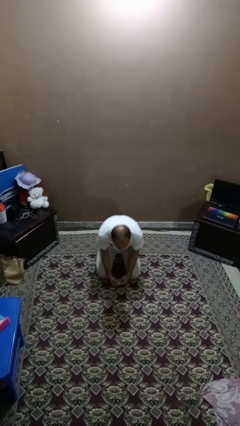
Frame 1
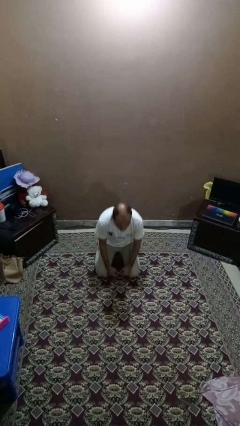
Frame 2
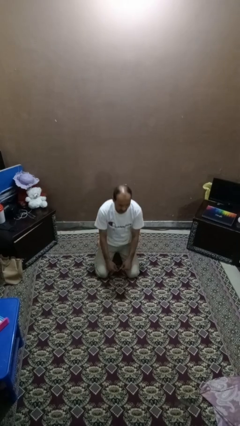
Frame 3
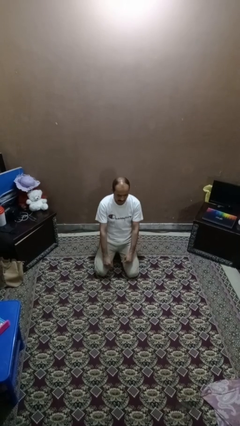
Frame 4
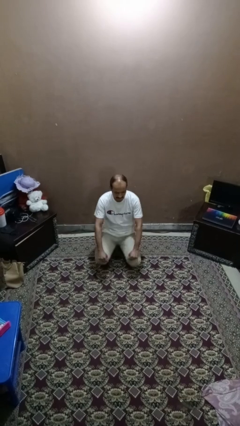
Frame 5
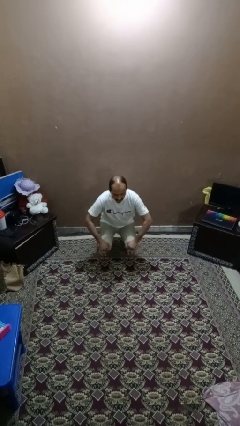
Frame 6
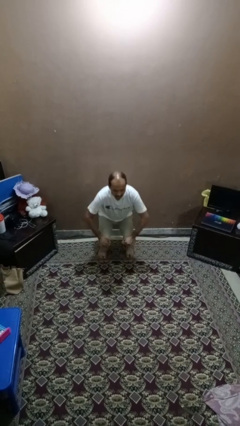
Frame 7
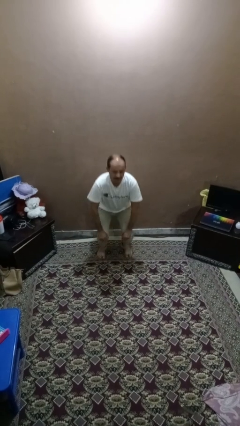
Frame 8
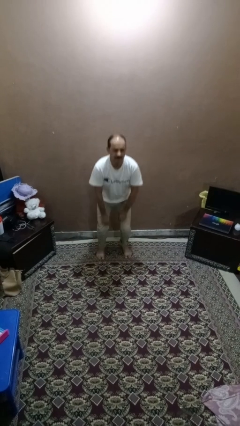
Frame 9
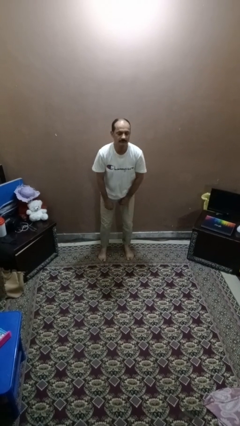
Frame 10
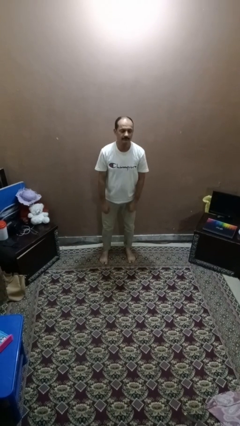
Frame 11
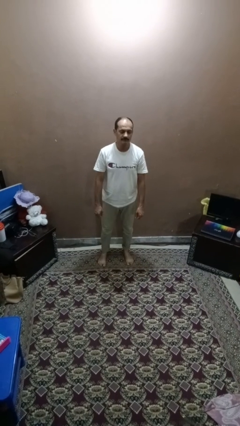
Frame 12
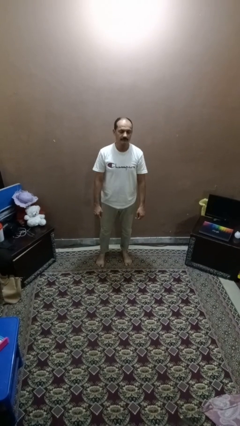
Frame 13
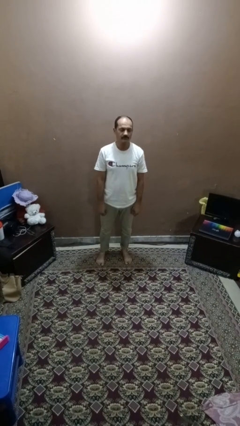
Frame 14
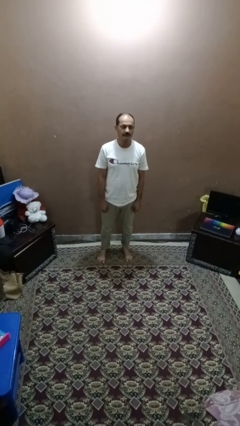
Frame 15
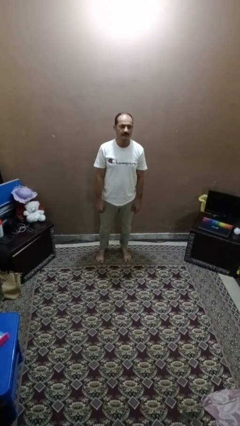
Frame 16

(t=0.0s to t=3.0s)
person stands up from floor

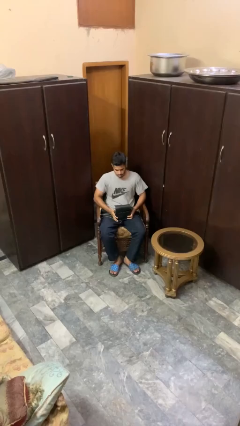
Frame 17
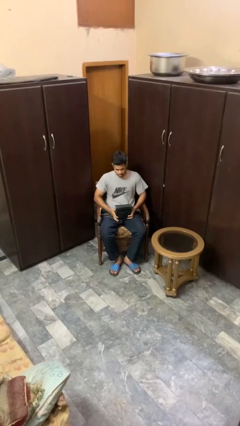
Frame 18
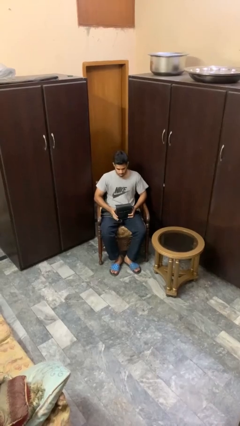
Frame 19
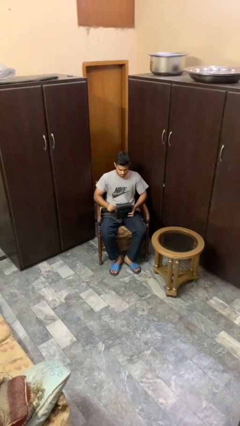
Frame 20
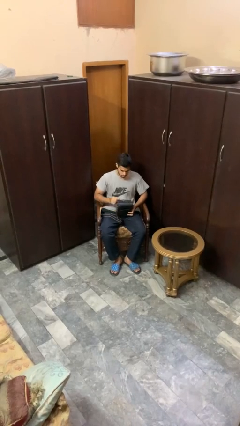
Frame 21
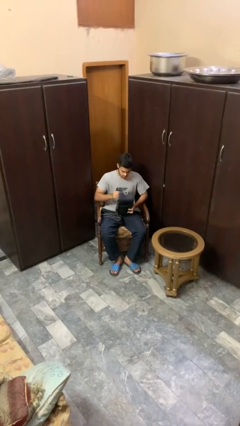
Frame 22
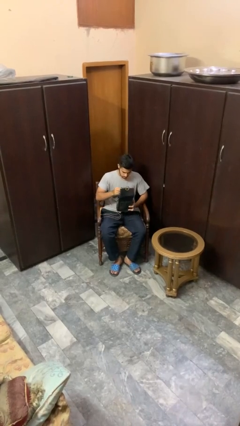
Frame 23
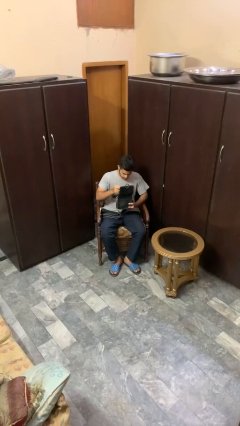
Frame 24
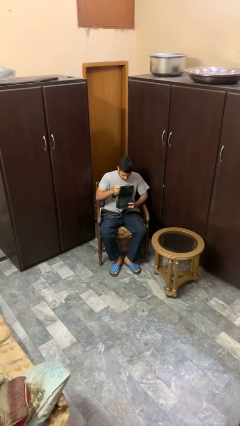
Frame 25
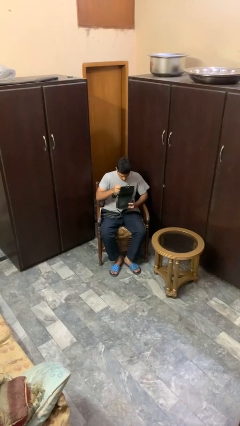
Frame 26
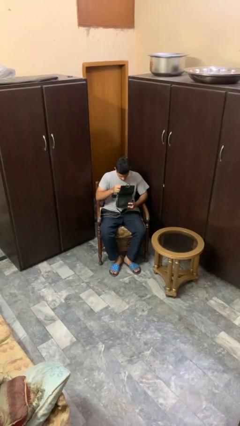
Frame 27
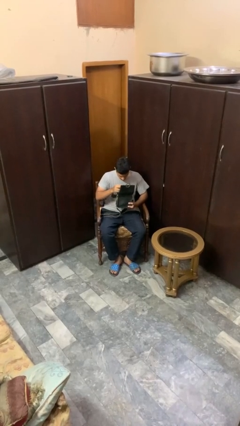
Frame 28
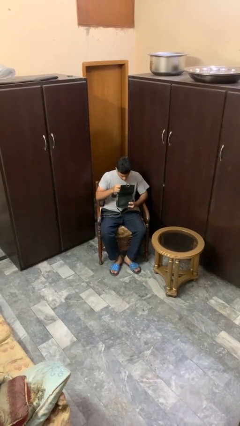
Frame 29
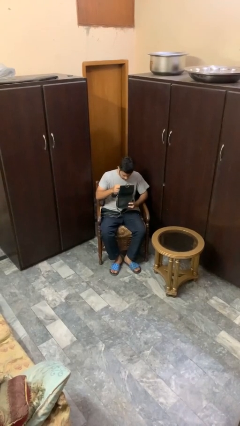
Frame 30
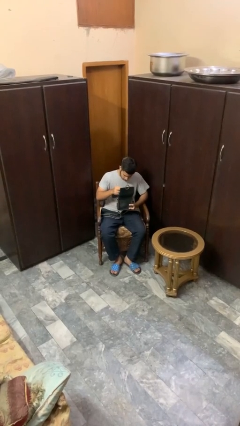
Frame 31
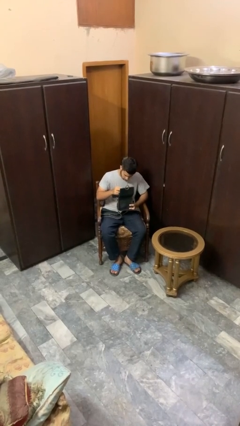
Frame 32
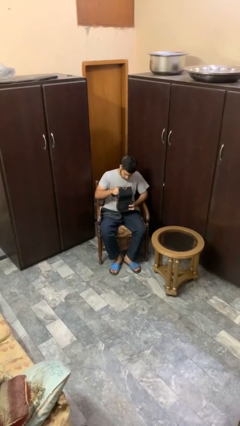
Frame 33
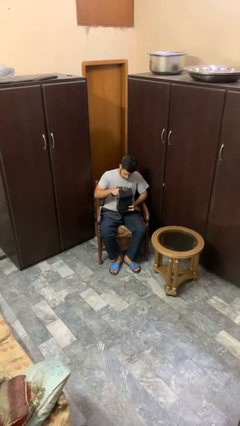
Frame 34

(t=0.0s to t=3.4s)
person searches in purse

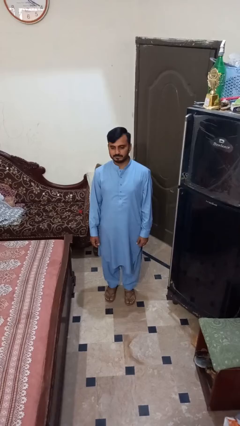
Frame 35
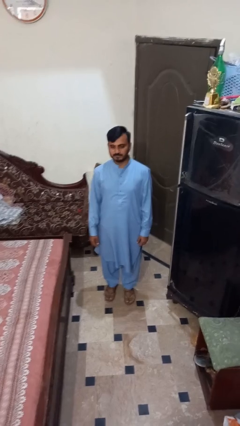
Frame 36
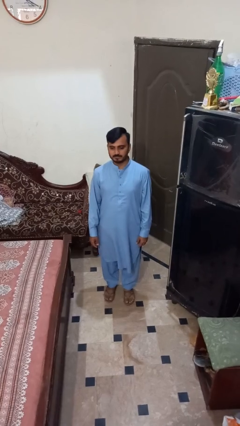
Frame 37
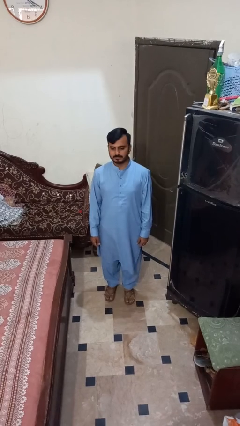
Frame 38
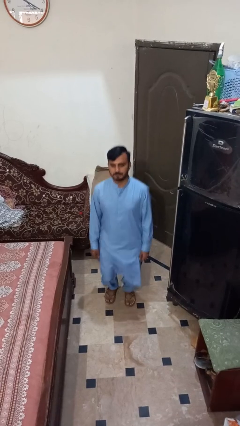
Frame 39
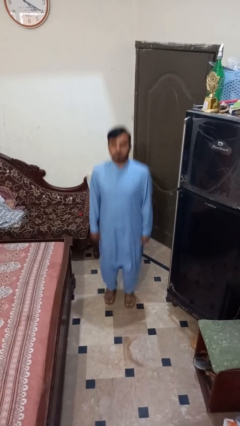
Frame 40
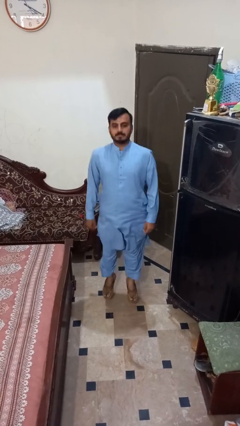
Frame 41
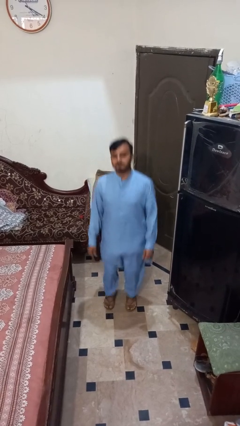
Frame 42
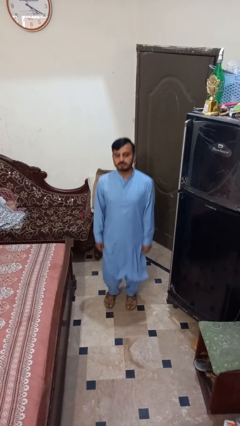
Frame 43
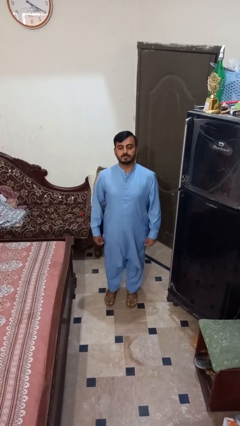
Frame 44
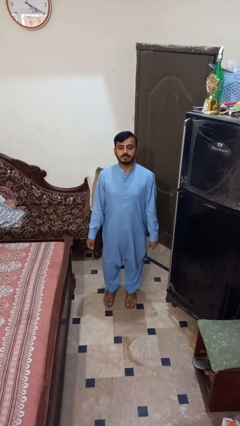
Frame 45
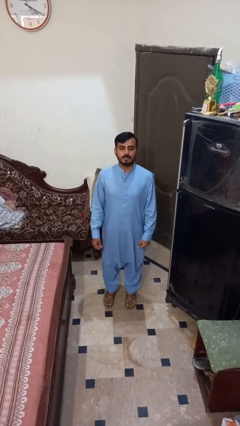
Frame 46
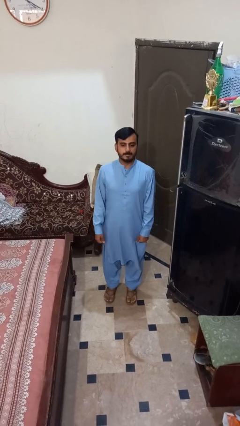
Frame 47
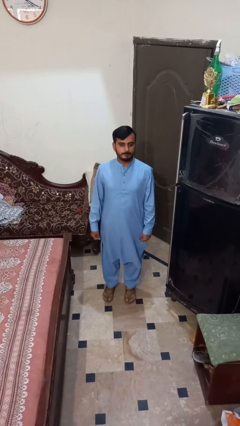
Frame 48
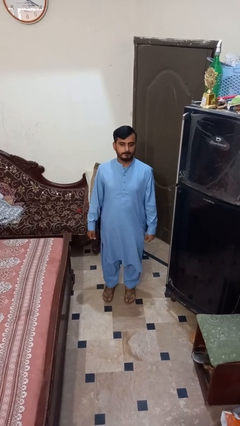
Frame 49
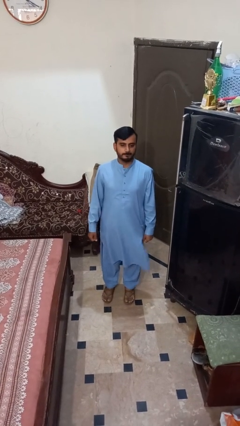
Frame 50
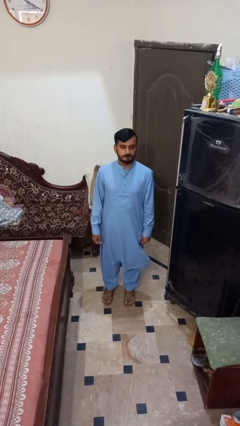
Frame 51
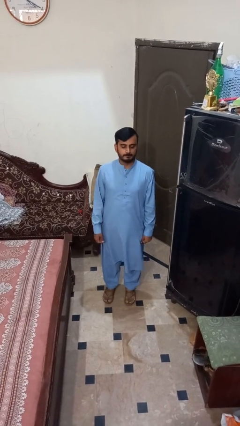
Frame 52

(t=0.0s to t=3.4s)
person jumps

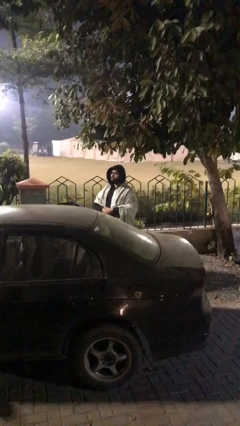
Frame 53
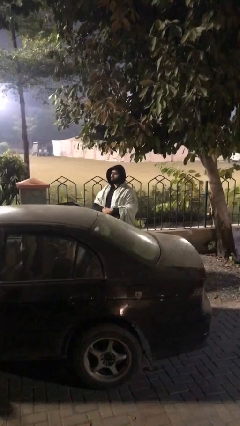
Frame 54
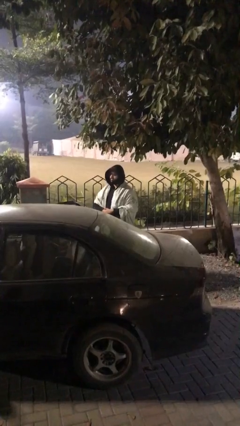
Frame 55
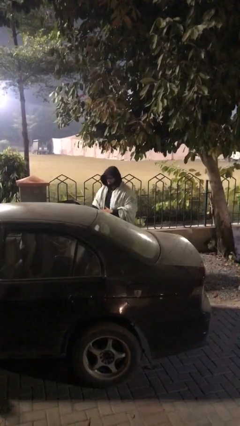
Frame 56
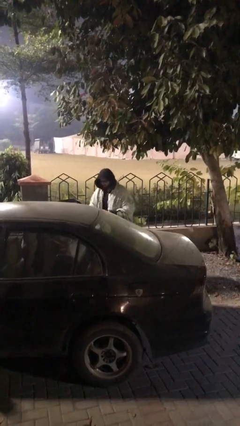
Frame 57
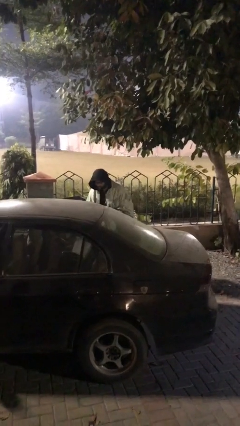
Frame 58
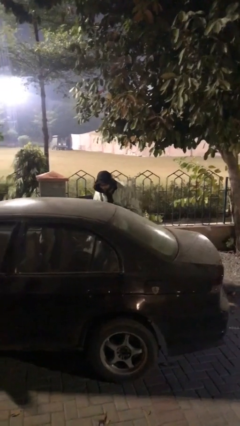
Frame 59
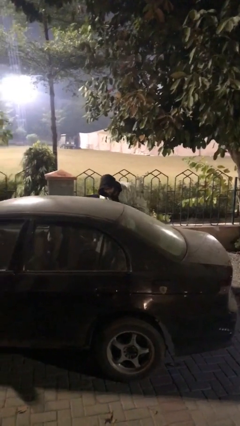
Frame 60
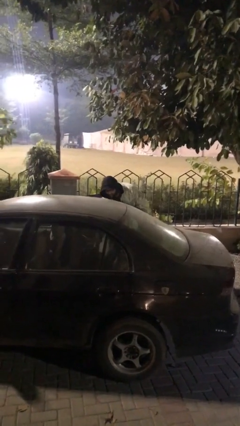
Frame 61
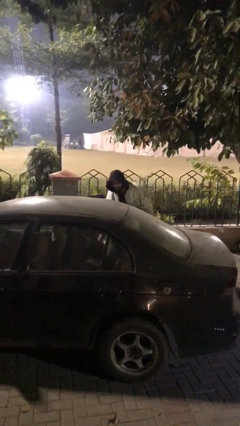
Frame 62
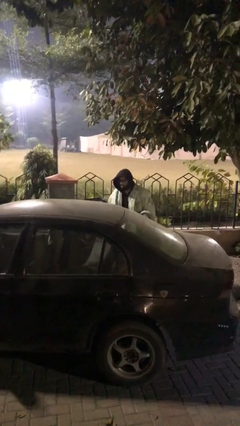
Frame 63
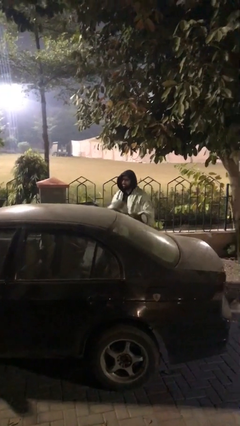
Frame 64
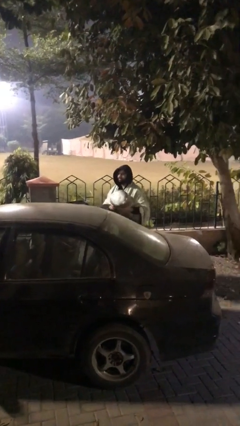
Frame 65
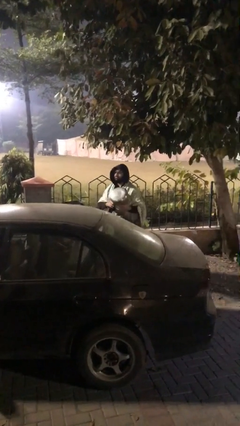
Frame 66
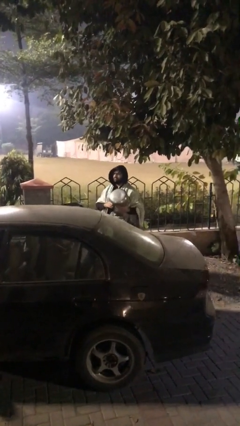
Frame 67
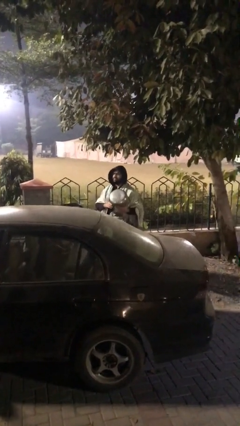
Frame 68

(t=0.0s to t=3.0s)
person unloads car

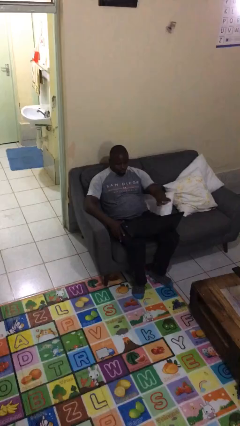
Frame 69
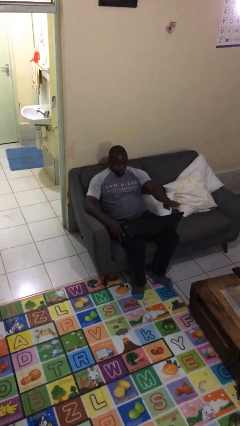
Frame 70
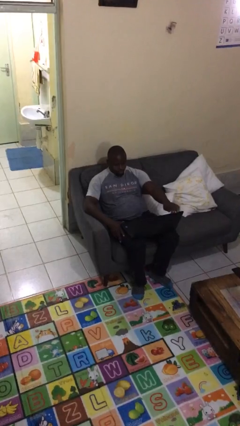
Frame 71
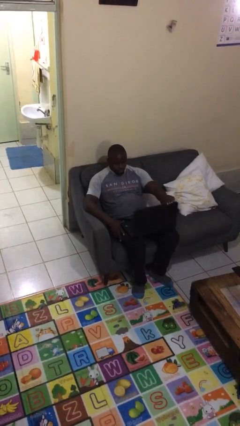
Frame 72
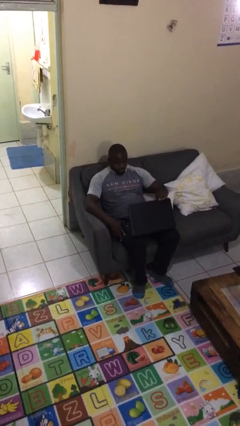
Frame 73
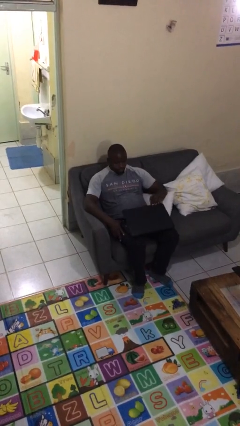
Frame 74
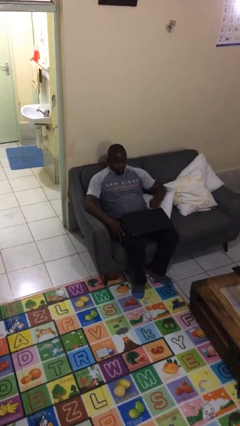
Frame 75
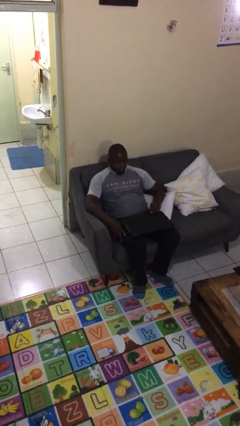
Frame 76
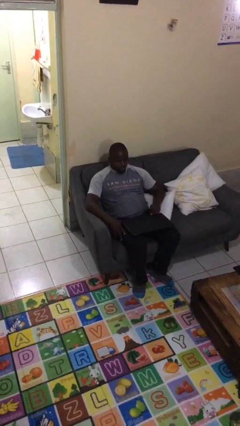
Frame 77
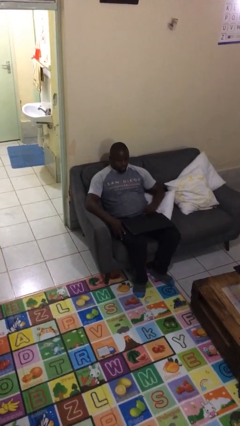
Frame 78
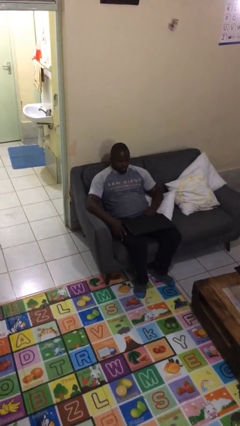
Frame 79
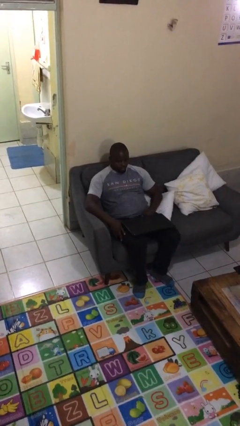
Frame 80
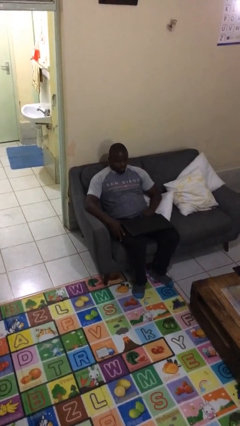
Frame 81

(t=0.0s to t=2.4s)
person closes laptop

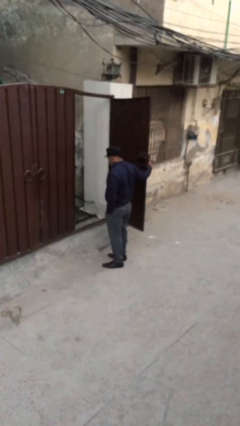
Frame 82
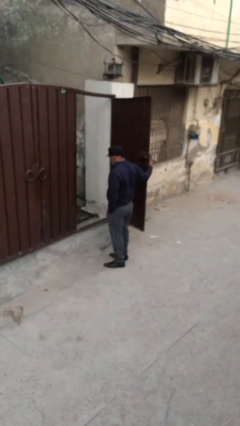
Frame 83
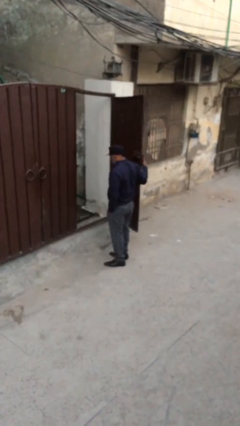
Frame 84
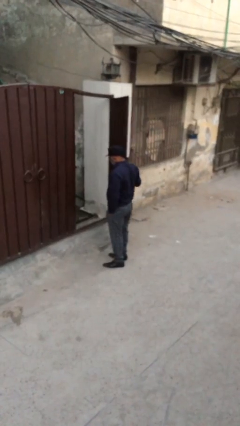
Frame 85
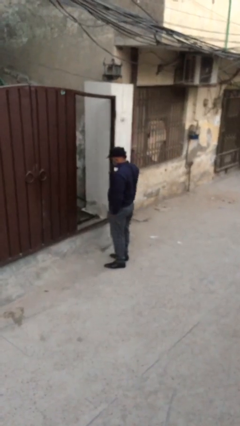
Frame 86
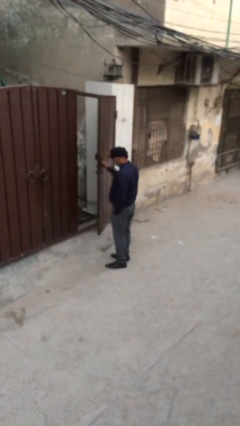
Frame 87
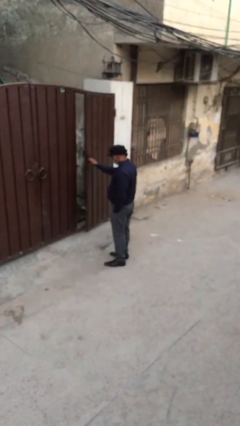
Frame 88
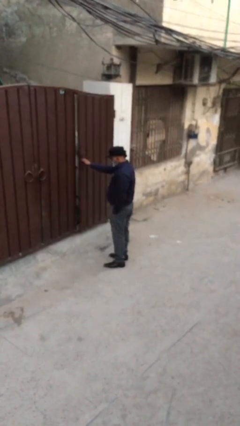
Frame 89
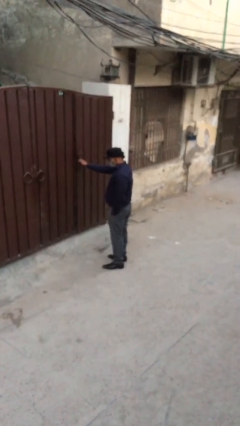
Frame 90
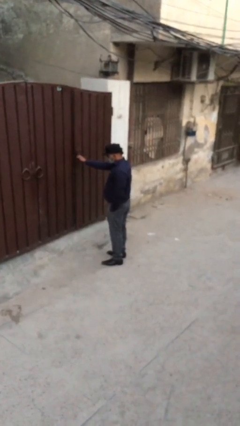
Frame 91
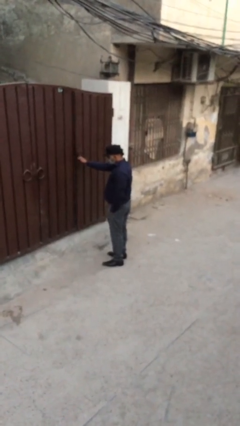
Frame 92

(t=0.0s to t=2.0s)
person closes facility door
